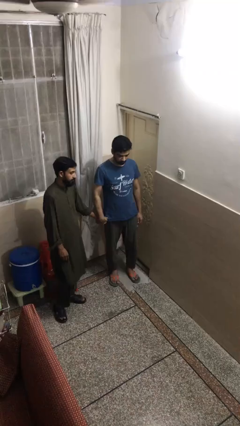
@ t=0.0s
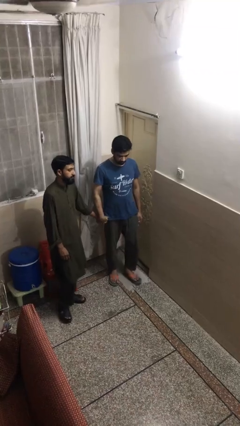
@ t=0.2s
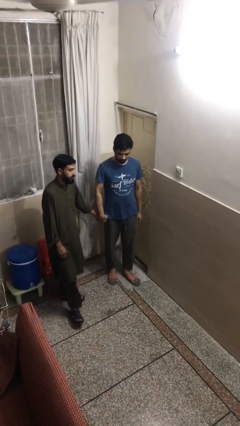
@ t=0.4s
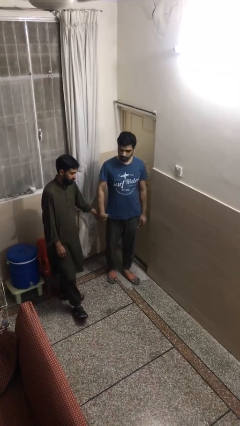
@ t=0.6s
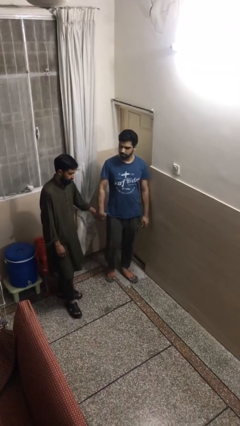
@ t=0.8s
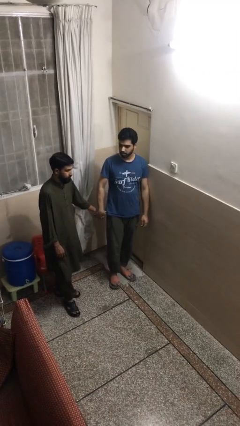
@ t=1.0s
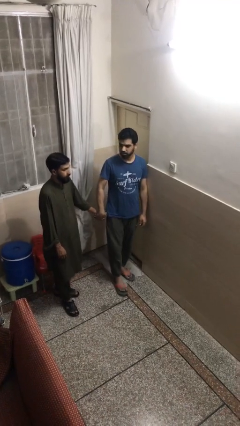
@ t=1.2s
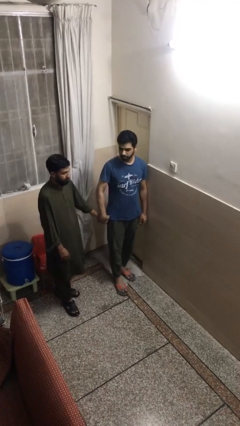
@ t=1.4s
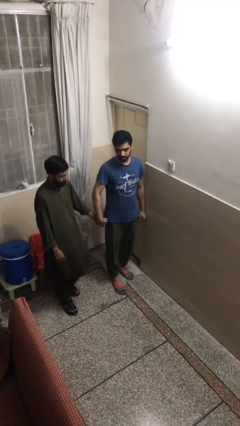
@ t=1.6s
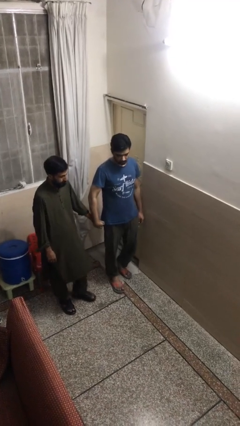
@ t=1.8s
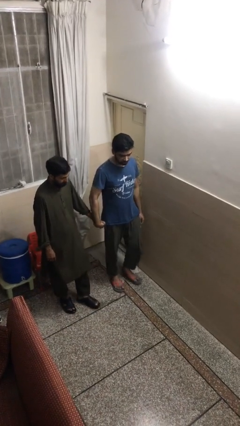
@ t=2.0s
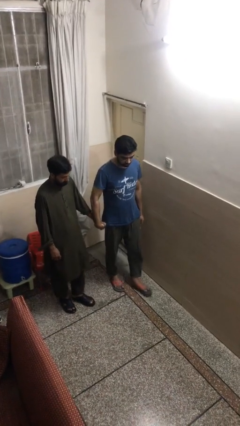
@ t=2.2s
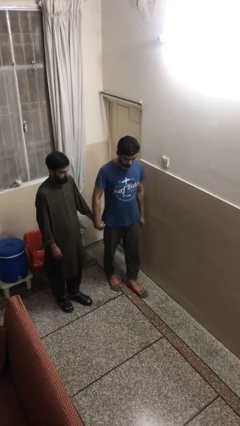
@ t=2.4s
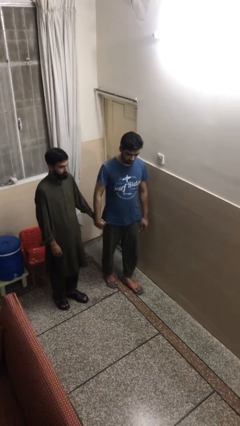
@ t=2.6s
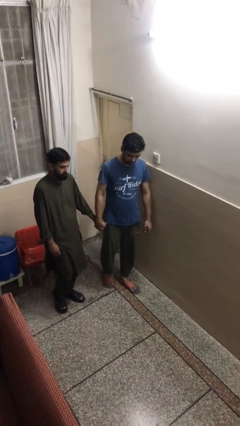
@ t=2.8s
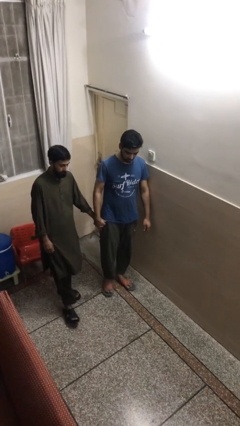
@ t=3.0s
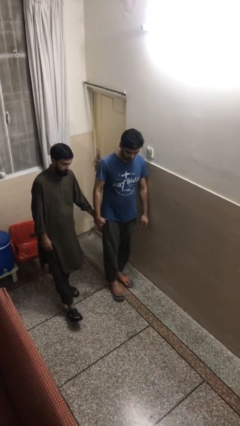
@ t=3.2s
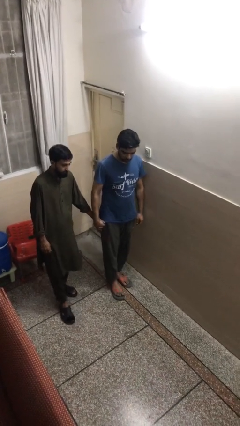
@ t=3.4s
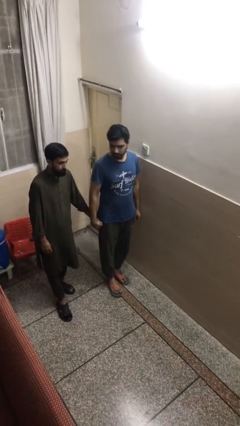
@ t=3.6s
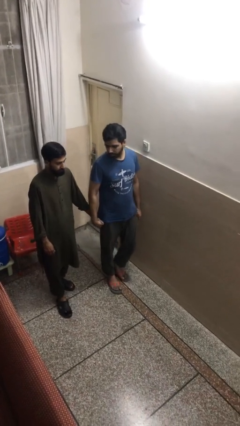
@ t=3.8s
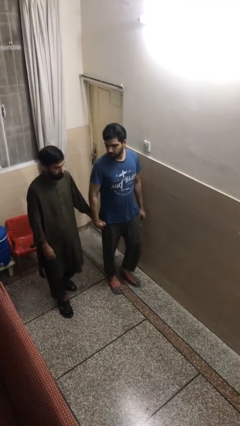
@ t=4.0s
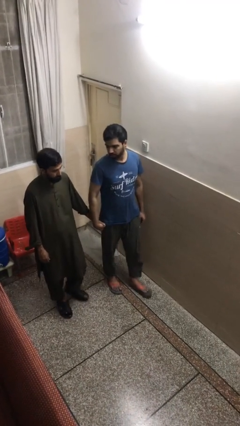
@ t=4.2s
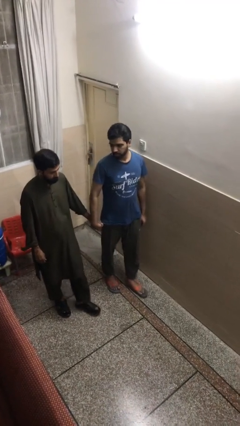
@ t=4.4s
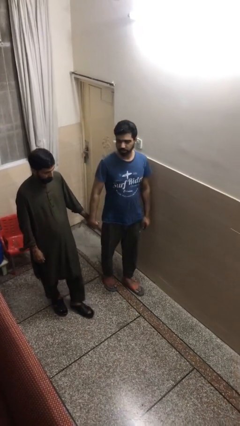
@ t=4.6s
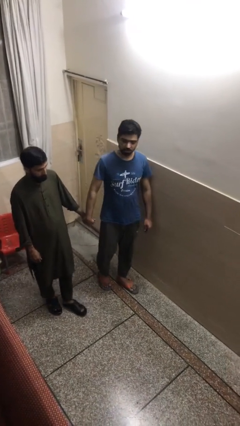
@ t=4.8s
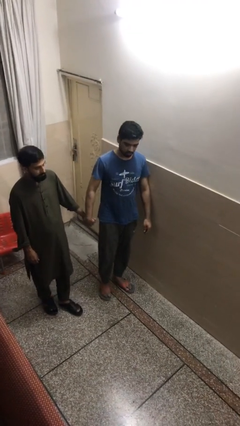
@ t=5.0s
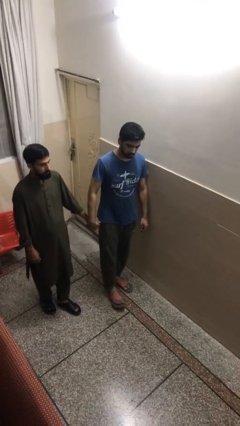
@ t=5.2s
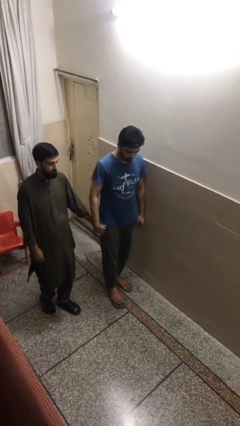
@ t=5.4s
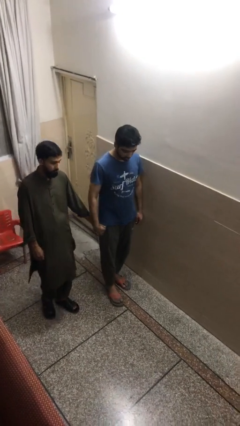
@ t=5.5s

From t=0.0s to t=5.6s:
person holds hand

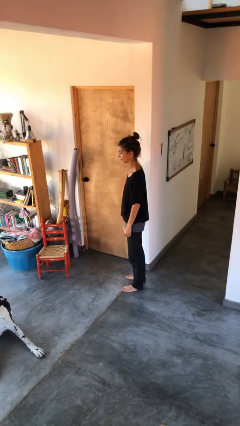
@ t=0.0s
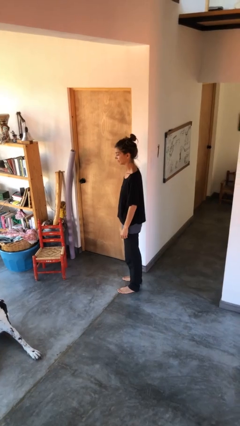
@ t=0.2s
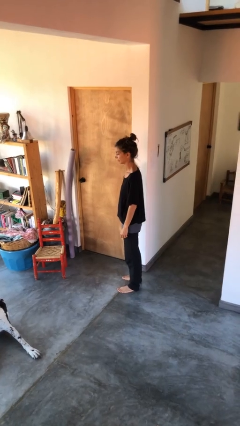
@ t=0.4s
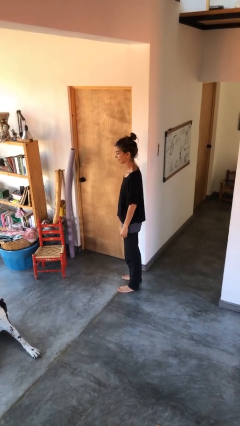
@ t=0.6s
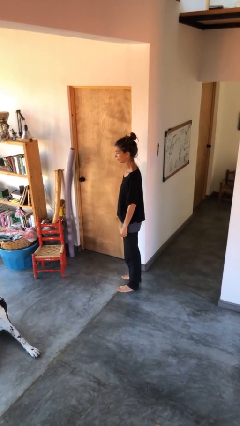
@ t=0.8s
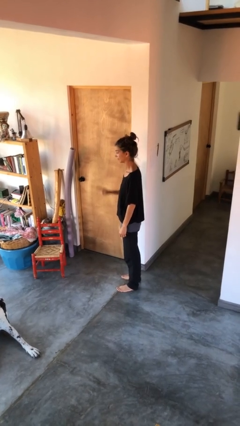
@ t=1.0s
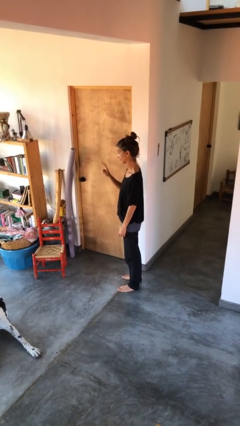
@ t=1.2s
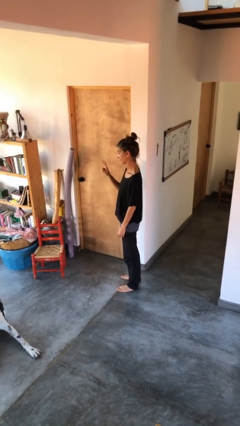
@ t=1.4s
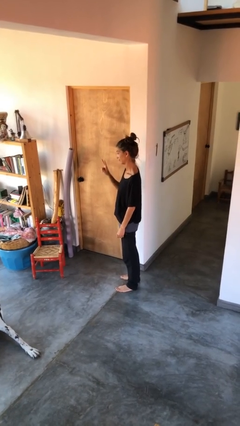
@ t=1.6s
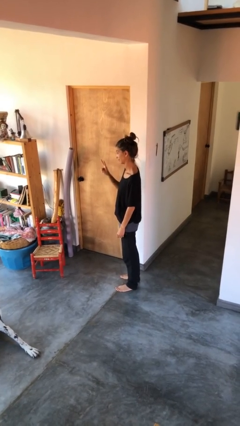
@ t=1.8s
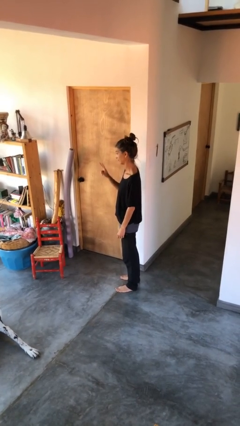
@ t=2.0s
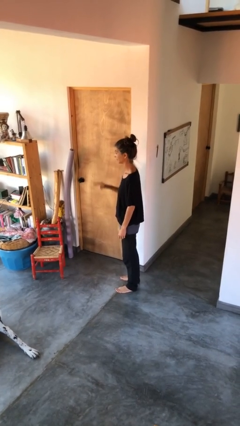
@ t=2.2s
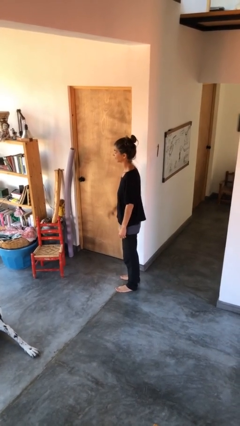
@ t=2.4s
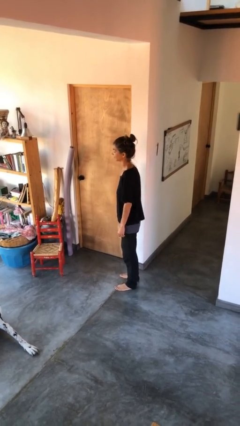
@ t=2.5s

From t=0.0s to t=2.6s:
person gestures peace

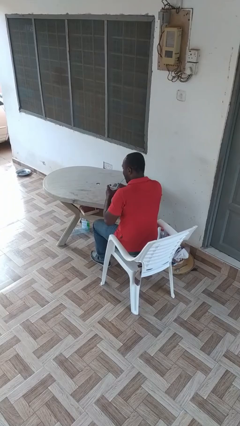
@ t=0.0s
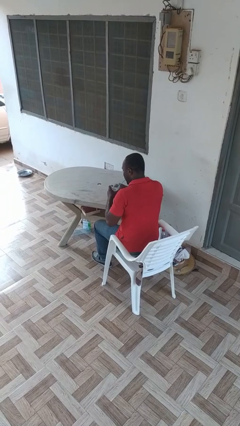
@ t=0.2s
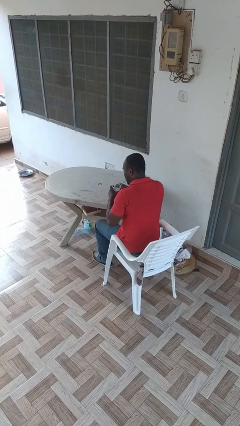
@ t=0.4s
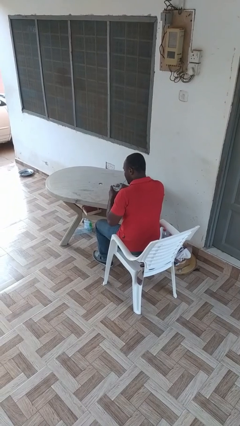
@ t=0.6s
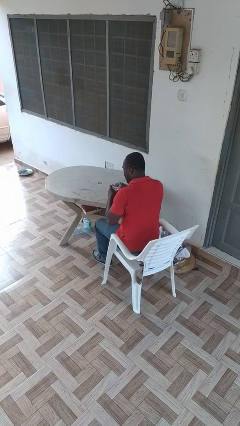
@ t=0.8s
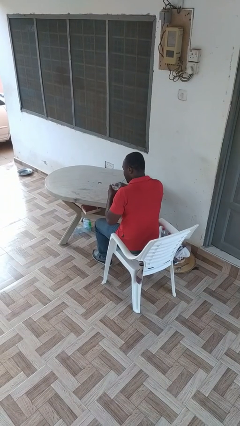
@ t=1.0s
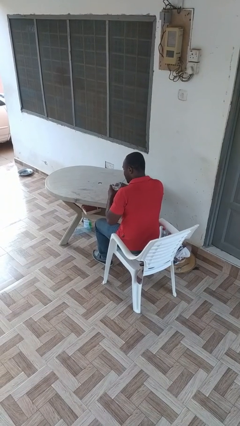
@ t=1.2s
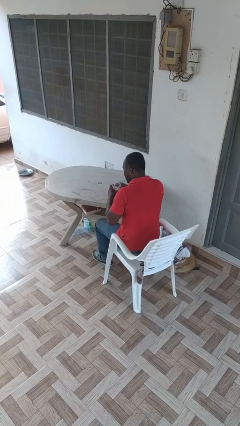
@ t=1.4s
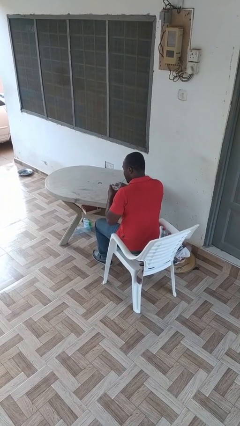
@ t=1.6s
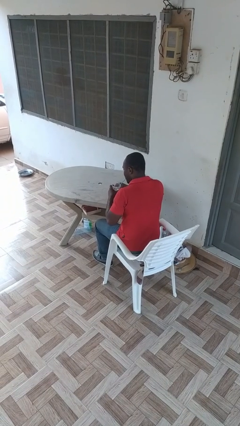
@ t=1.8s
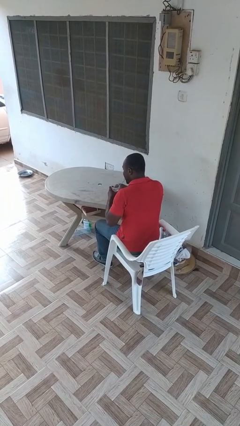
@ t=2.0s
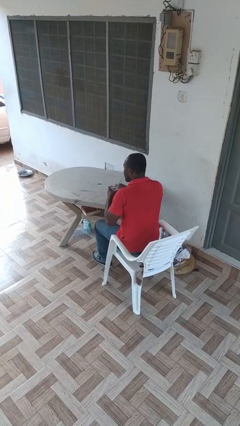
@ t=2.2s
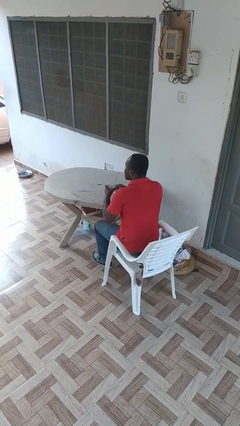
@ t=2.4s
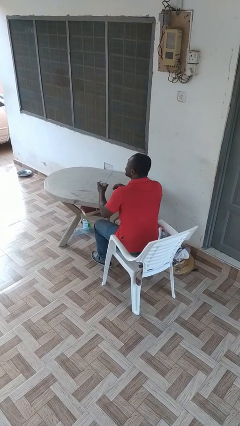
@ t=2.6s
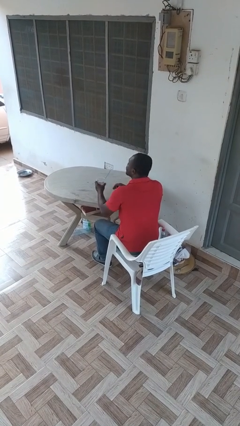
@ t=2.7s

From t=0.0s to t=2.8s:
person drinks from straw

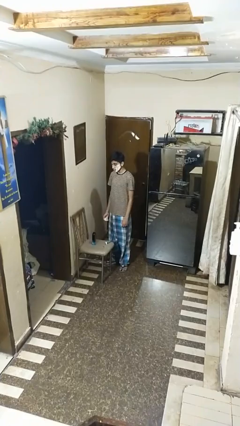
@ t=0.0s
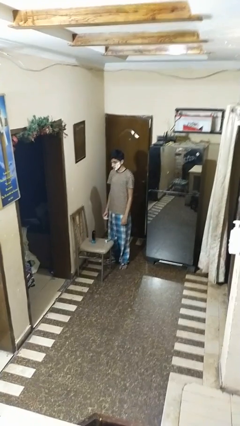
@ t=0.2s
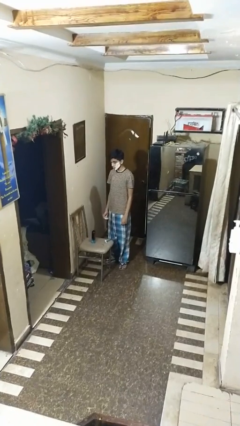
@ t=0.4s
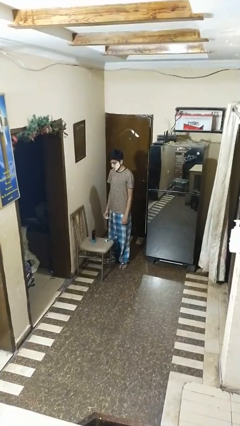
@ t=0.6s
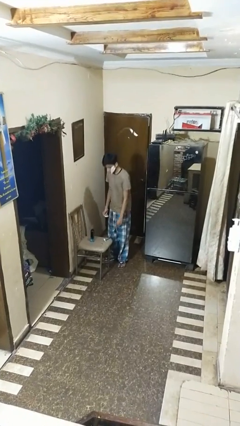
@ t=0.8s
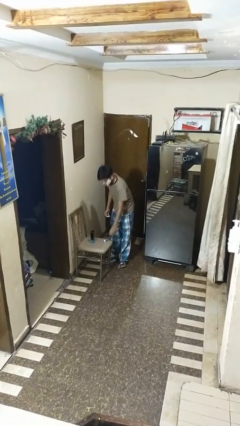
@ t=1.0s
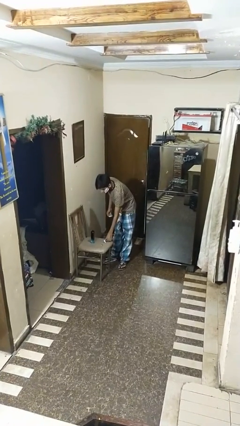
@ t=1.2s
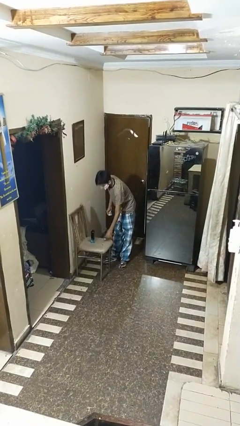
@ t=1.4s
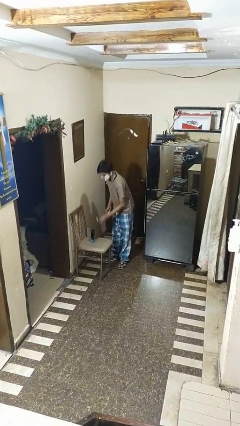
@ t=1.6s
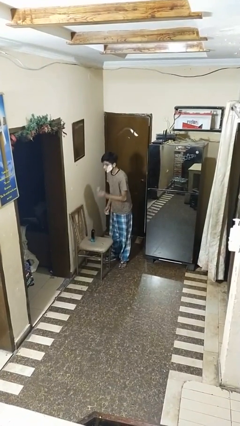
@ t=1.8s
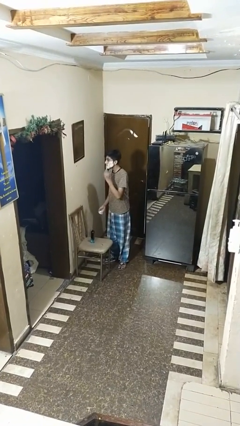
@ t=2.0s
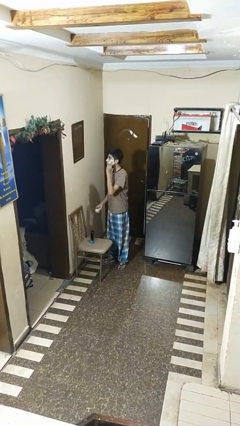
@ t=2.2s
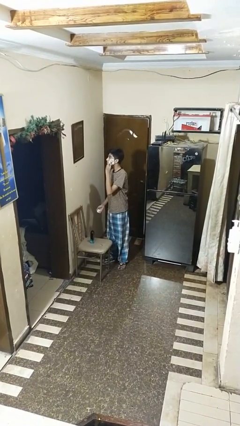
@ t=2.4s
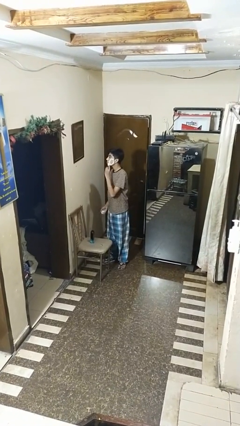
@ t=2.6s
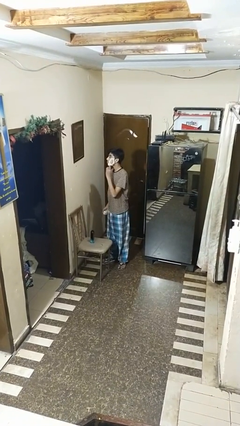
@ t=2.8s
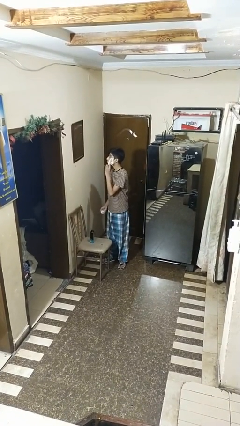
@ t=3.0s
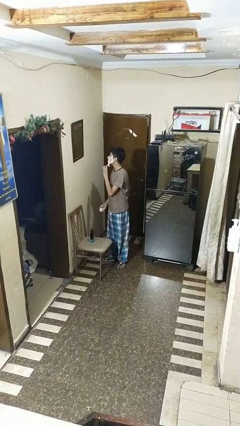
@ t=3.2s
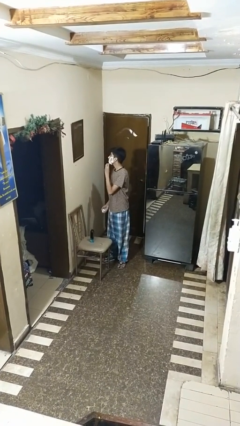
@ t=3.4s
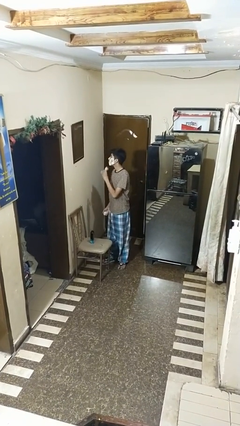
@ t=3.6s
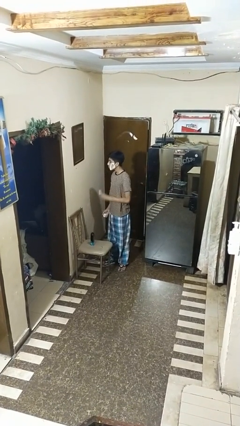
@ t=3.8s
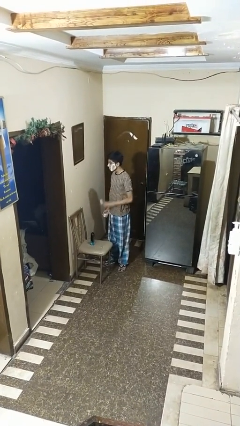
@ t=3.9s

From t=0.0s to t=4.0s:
person shaves face

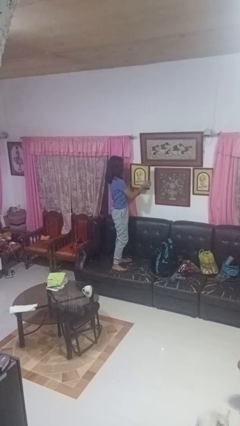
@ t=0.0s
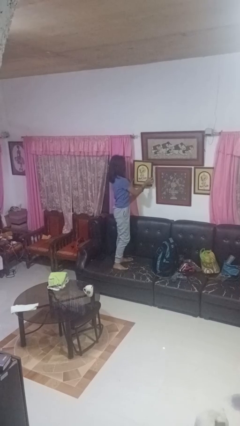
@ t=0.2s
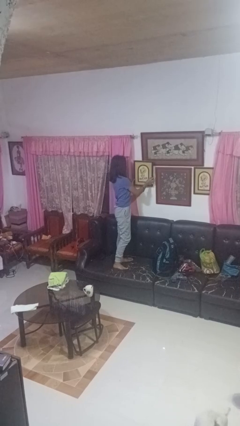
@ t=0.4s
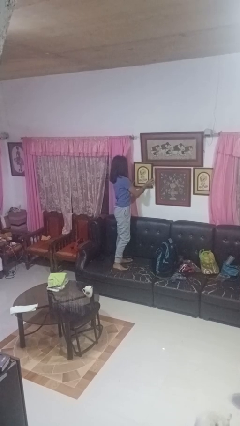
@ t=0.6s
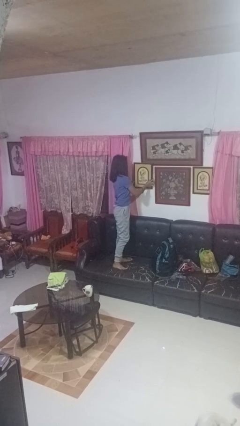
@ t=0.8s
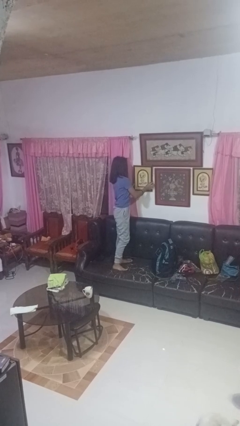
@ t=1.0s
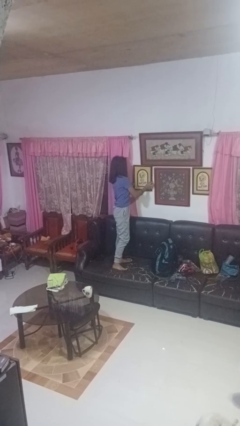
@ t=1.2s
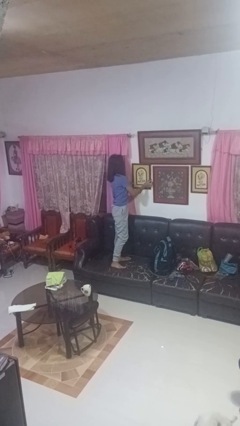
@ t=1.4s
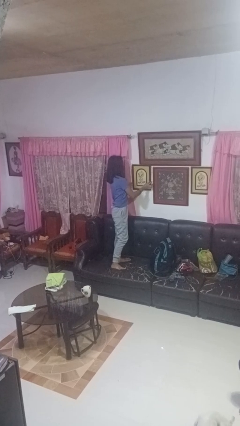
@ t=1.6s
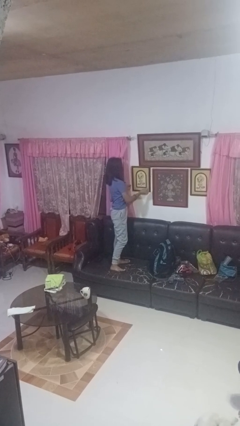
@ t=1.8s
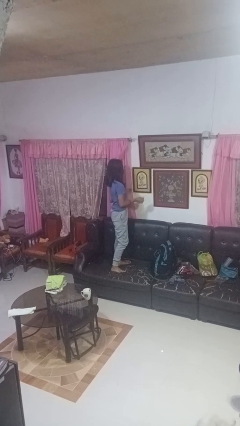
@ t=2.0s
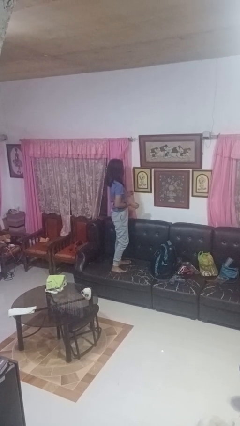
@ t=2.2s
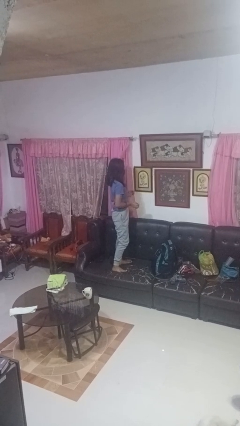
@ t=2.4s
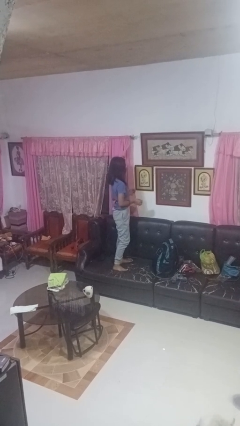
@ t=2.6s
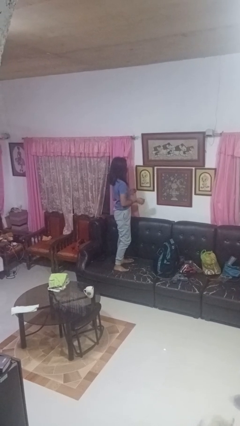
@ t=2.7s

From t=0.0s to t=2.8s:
person puts up picture frame
